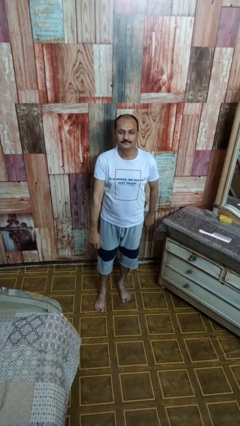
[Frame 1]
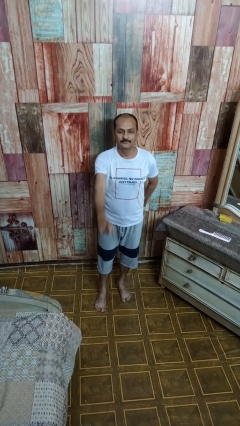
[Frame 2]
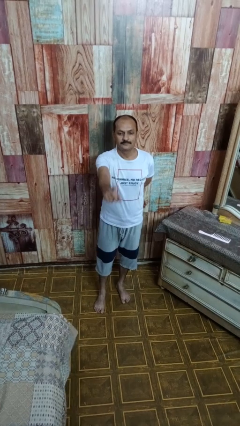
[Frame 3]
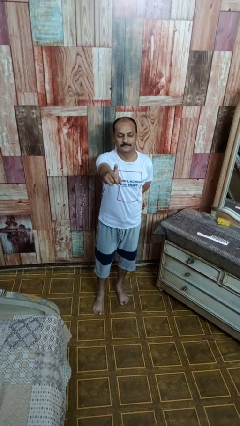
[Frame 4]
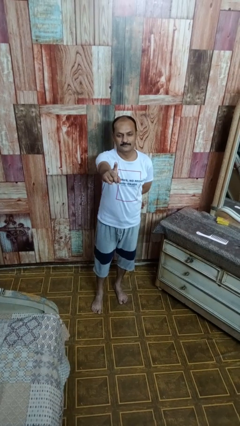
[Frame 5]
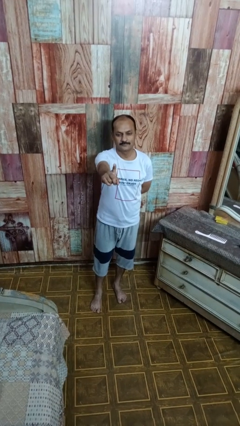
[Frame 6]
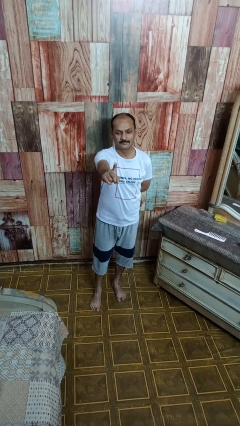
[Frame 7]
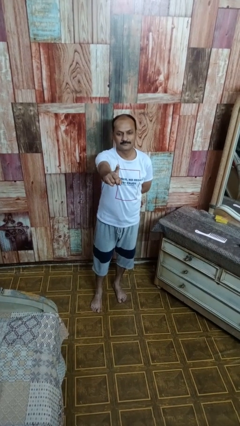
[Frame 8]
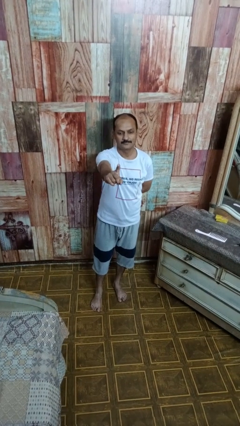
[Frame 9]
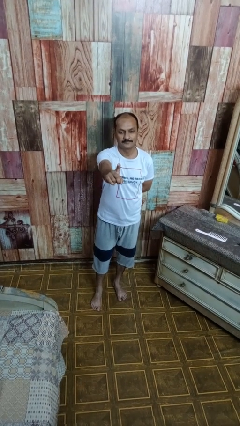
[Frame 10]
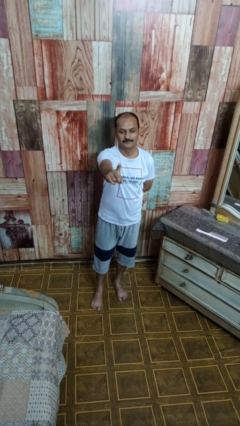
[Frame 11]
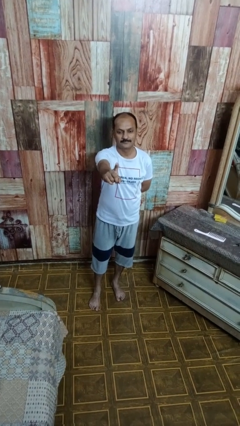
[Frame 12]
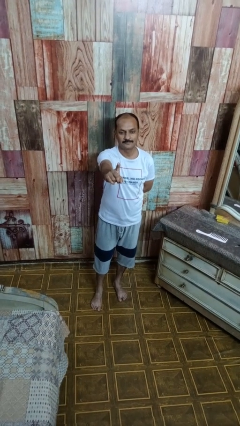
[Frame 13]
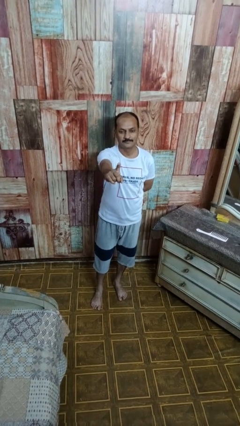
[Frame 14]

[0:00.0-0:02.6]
person gestures number one

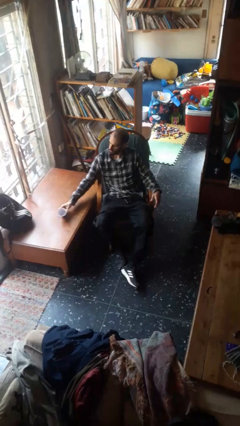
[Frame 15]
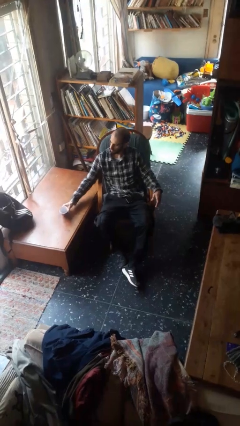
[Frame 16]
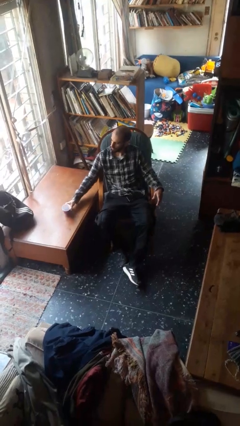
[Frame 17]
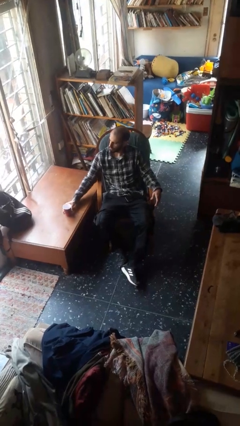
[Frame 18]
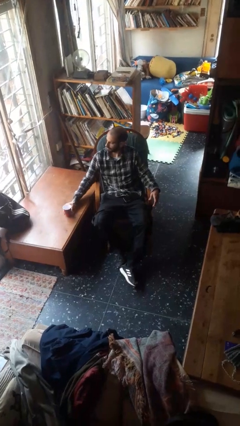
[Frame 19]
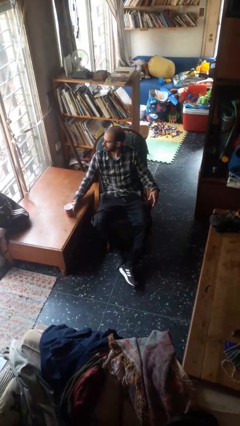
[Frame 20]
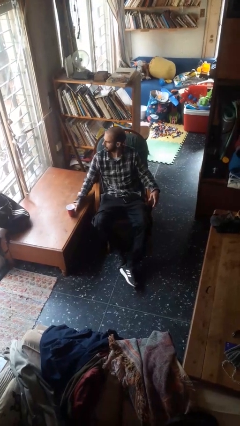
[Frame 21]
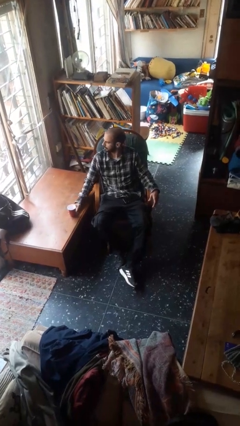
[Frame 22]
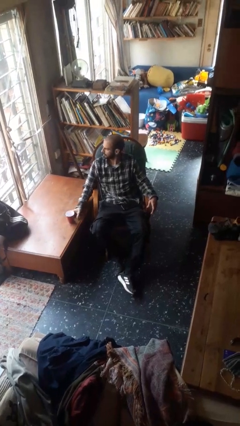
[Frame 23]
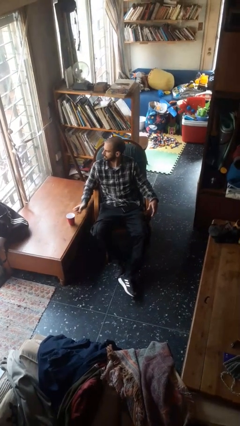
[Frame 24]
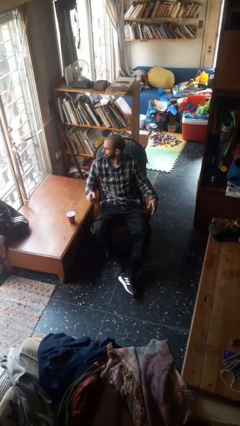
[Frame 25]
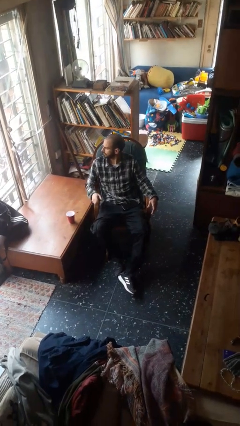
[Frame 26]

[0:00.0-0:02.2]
person sets upright glass

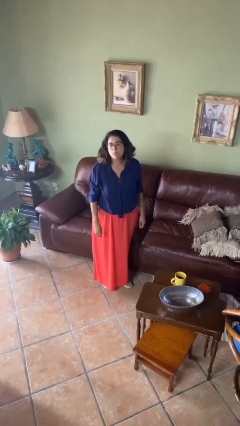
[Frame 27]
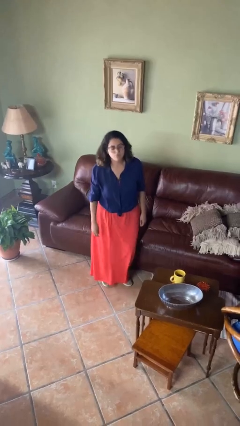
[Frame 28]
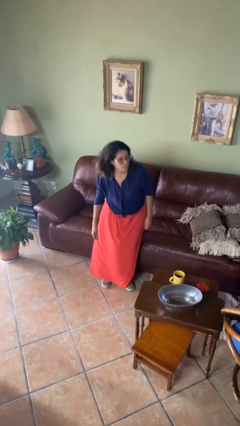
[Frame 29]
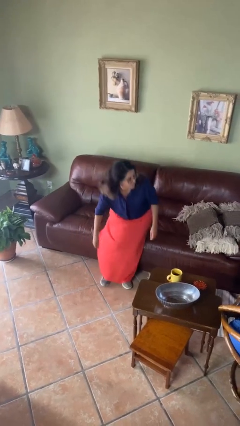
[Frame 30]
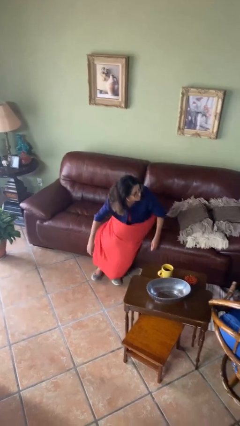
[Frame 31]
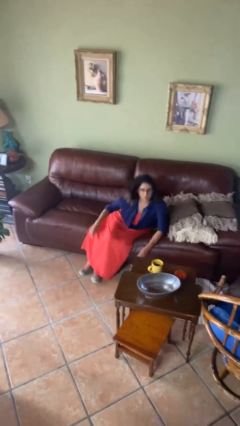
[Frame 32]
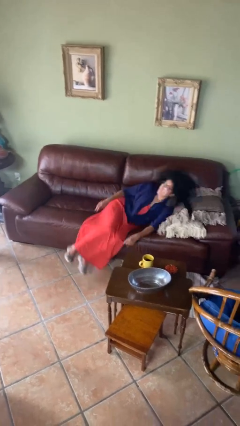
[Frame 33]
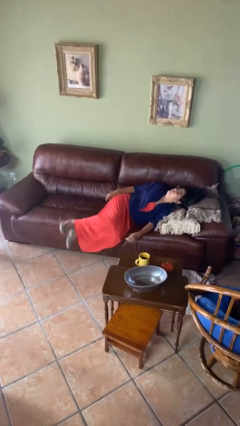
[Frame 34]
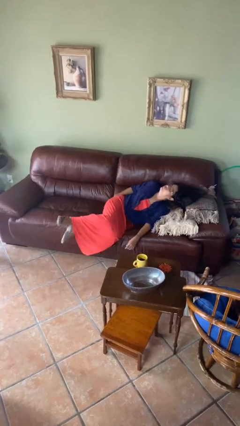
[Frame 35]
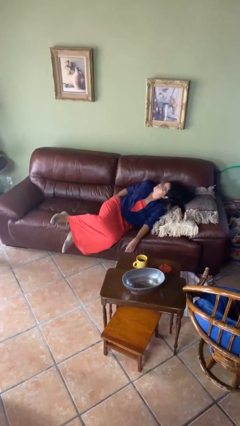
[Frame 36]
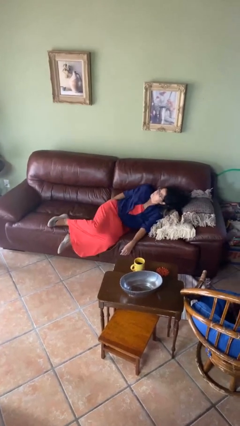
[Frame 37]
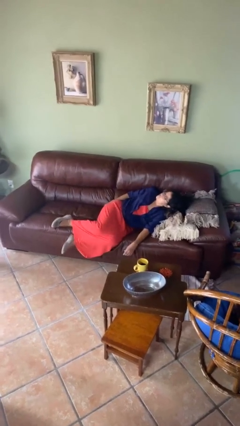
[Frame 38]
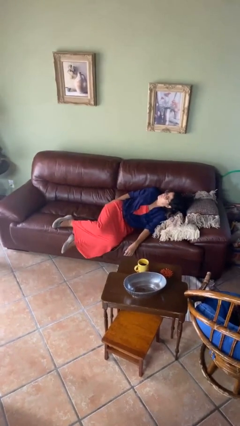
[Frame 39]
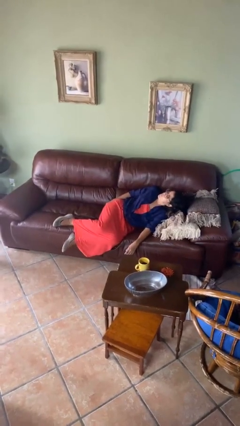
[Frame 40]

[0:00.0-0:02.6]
person lies down on couch

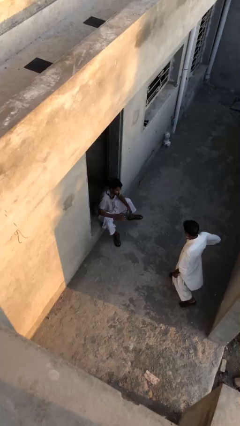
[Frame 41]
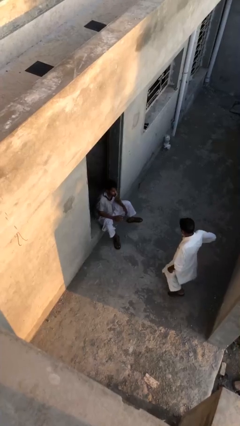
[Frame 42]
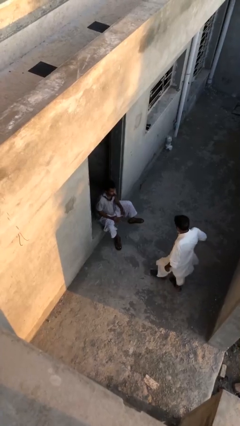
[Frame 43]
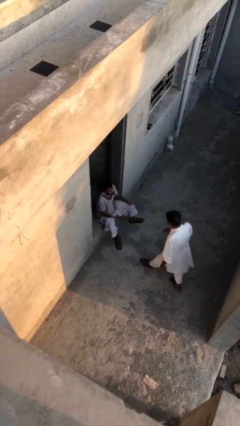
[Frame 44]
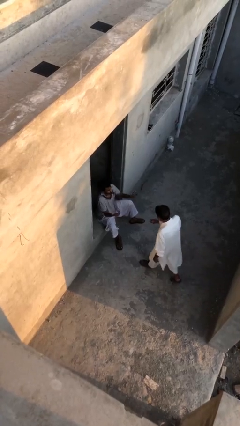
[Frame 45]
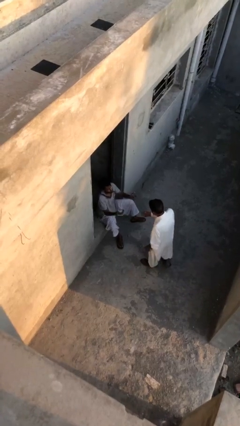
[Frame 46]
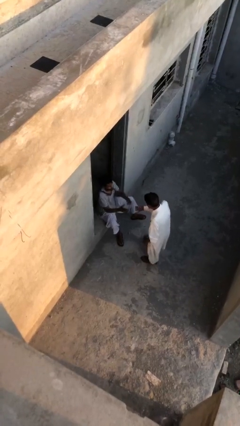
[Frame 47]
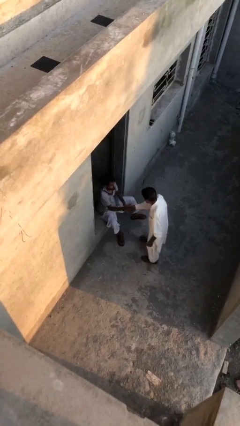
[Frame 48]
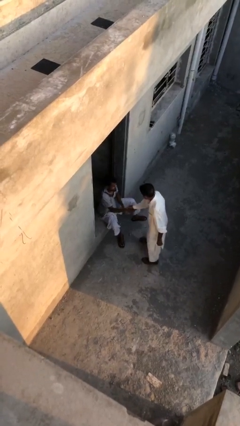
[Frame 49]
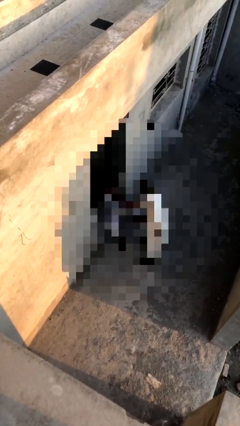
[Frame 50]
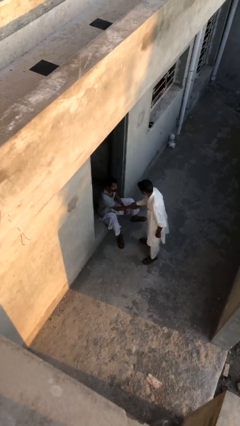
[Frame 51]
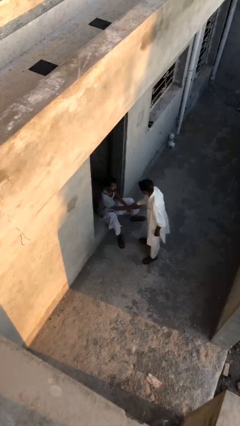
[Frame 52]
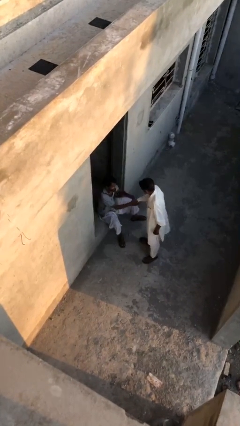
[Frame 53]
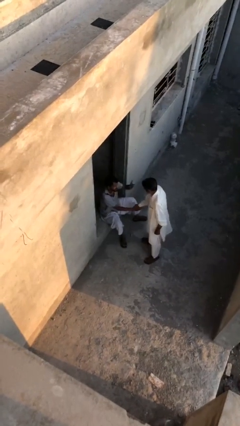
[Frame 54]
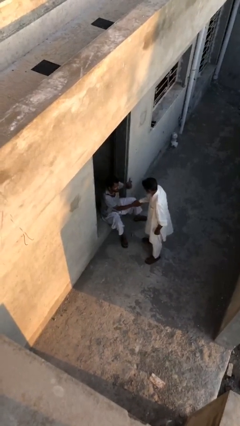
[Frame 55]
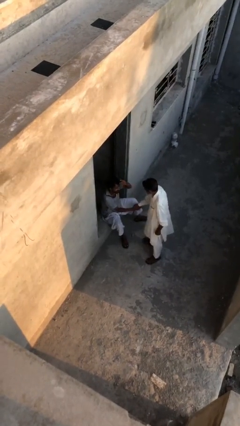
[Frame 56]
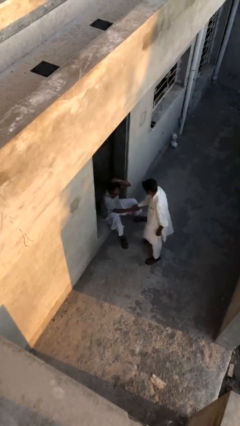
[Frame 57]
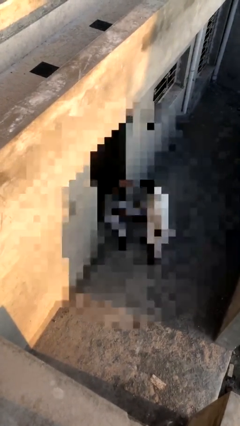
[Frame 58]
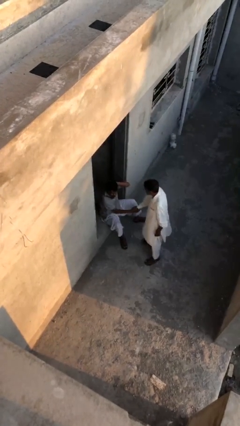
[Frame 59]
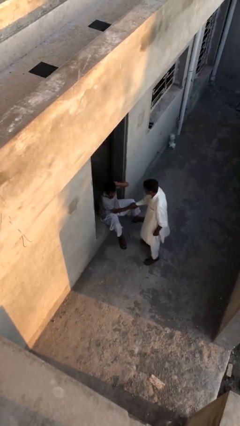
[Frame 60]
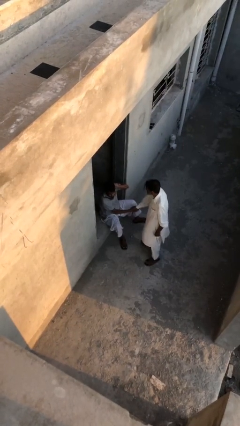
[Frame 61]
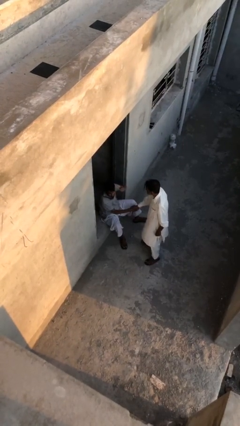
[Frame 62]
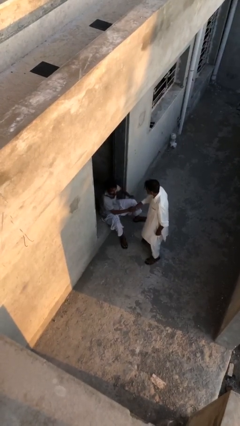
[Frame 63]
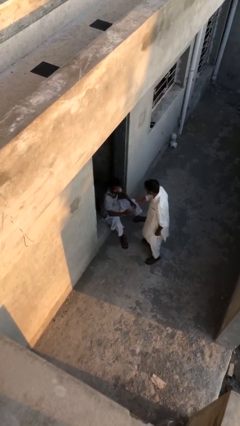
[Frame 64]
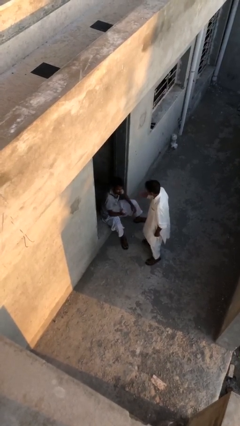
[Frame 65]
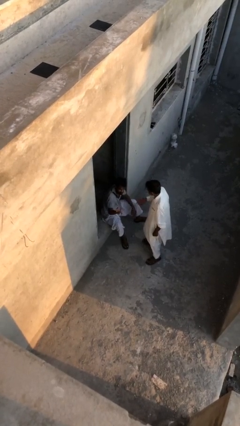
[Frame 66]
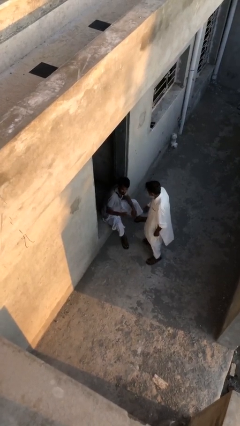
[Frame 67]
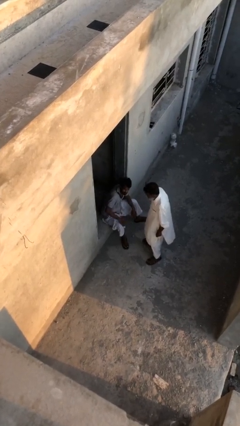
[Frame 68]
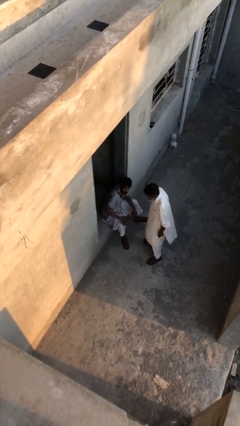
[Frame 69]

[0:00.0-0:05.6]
person shakes hand

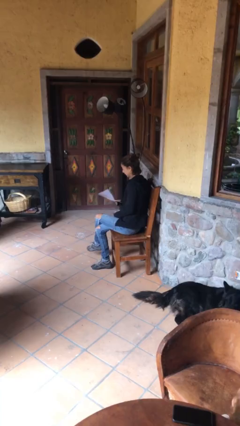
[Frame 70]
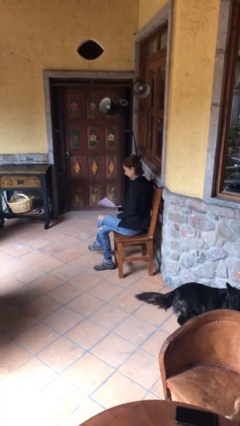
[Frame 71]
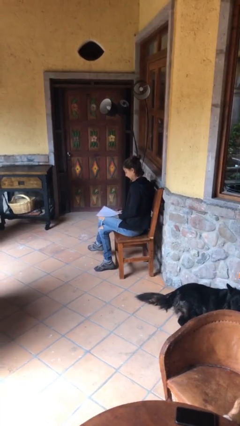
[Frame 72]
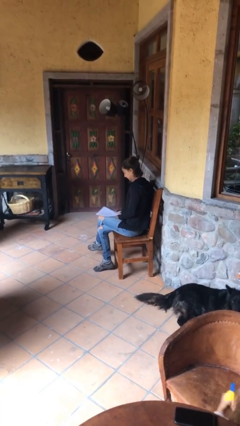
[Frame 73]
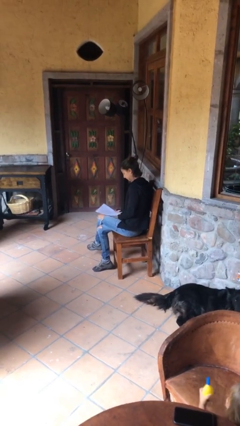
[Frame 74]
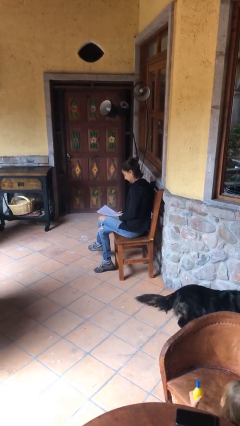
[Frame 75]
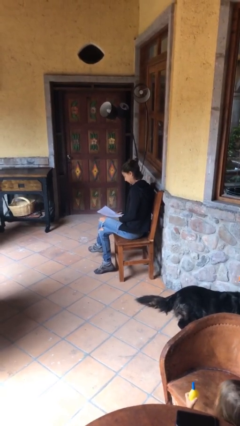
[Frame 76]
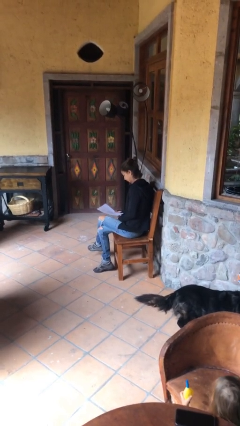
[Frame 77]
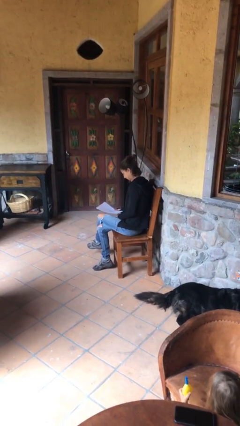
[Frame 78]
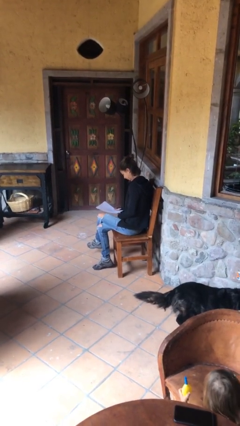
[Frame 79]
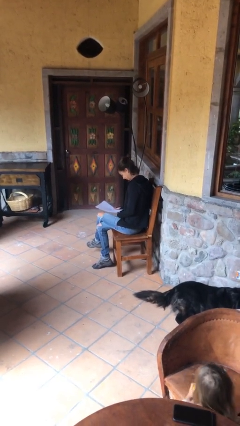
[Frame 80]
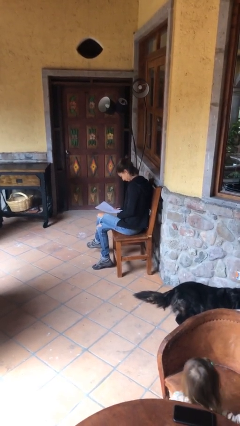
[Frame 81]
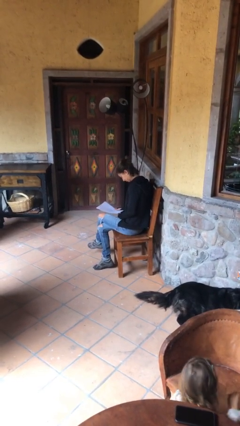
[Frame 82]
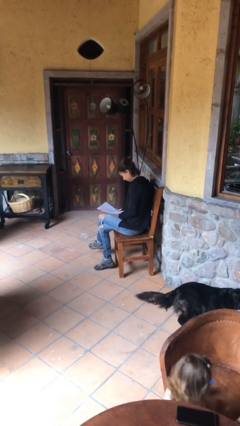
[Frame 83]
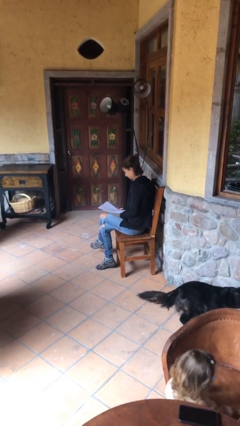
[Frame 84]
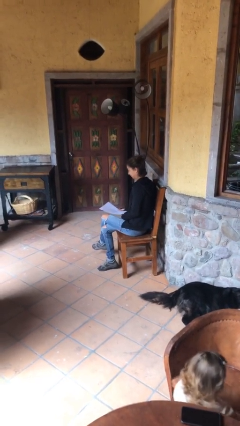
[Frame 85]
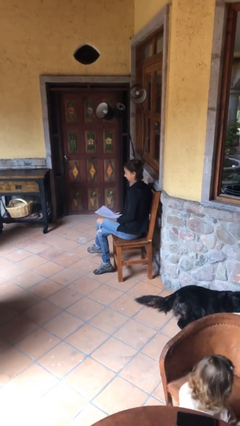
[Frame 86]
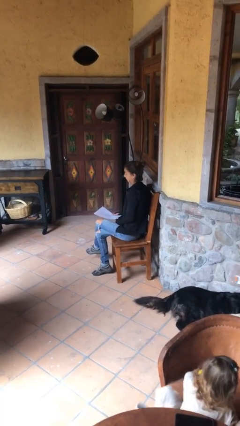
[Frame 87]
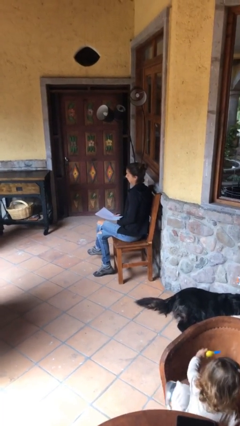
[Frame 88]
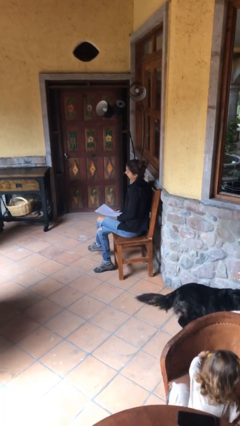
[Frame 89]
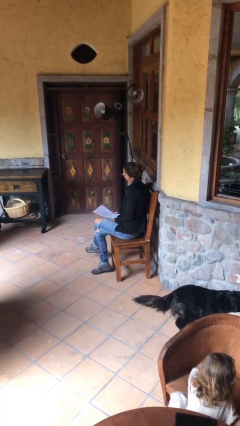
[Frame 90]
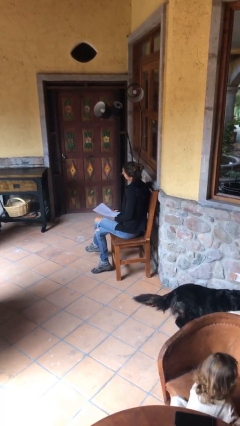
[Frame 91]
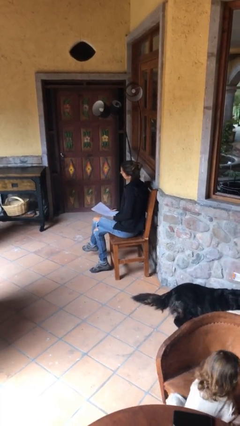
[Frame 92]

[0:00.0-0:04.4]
person reads document

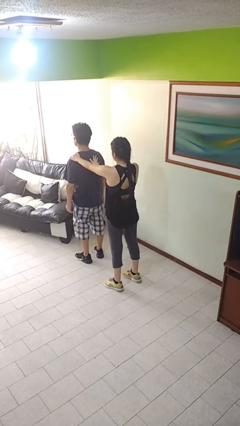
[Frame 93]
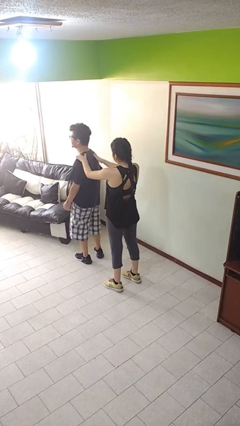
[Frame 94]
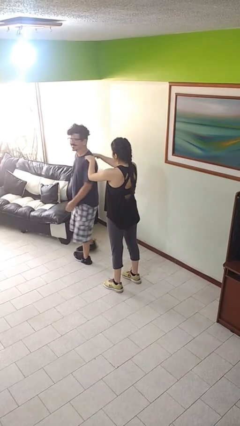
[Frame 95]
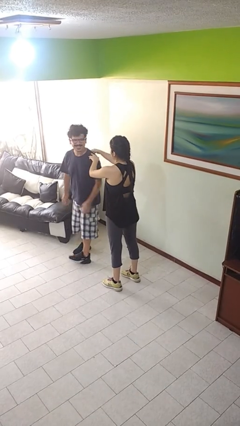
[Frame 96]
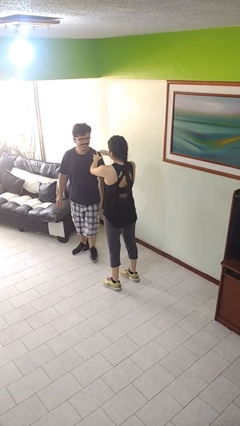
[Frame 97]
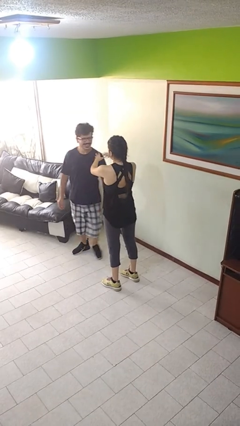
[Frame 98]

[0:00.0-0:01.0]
person spins person around
